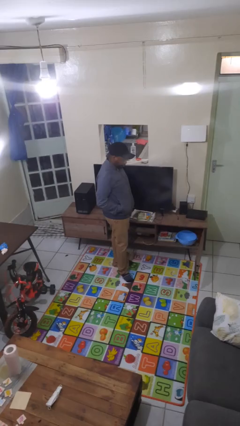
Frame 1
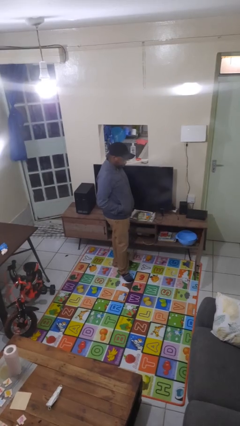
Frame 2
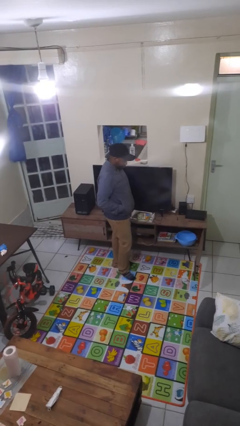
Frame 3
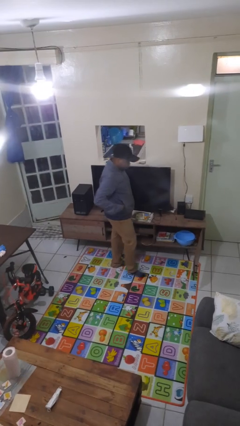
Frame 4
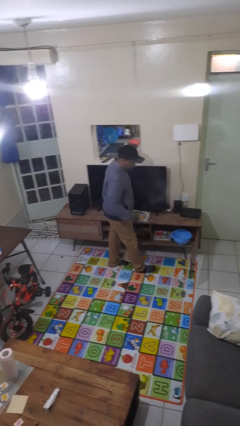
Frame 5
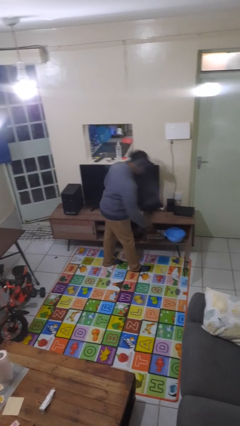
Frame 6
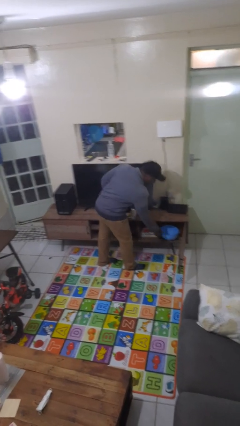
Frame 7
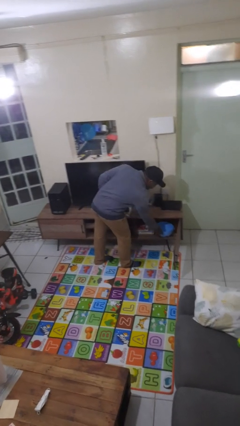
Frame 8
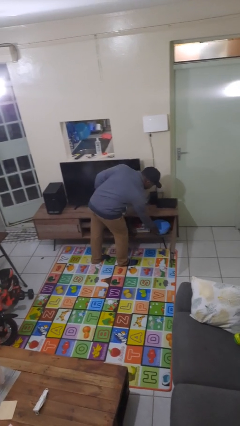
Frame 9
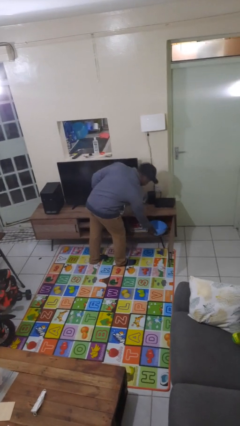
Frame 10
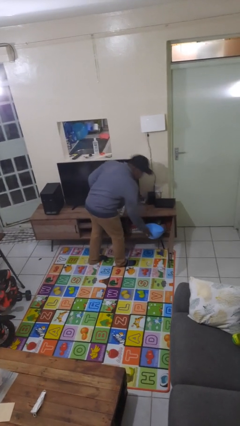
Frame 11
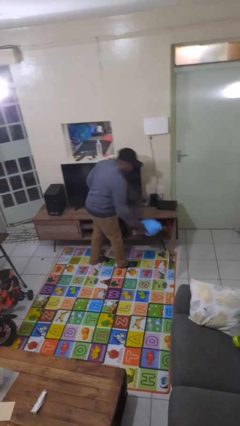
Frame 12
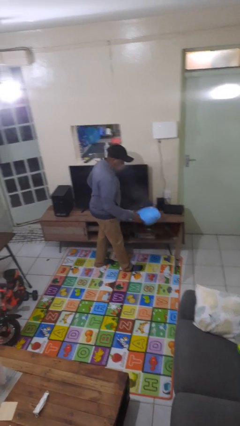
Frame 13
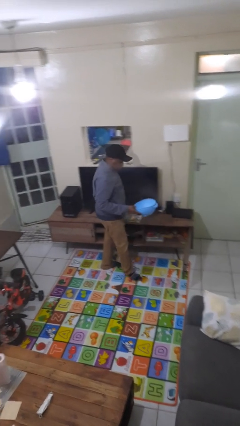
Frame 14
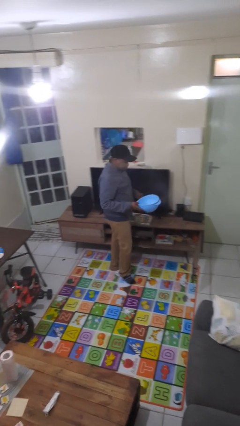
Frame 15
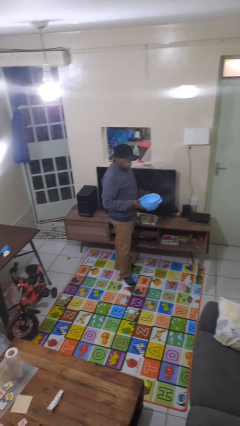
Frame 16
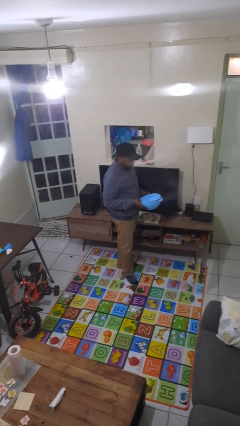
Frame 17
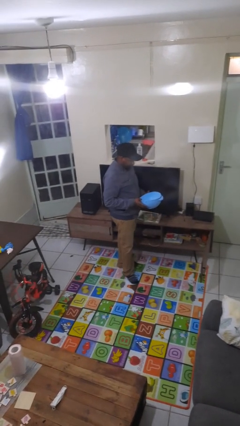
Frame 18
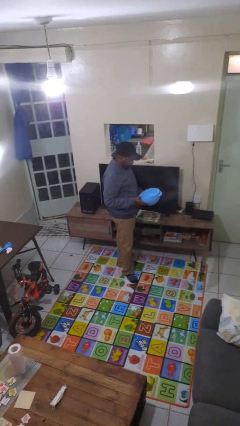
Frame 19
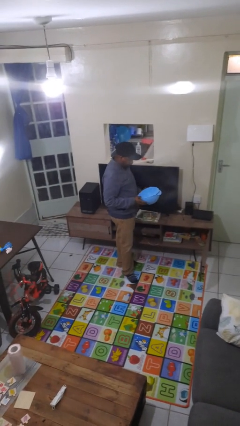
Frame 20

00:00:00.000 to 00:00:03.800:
person picks up object from cabinet

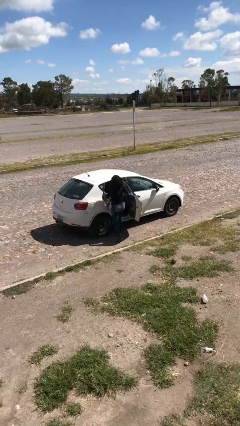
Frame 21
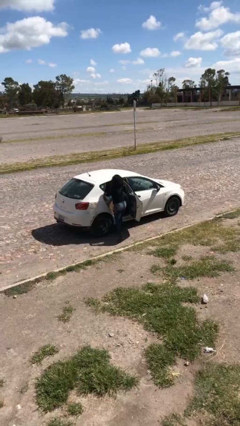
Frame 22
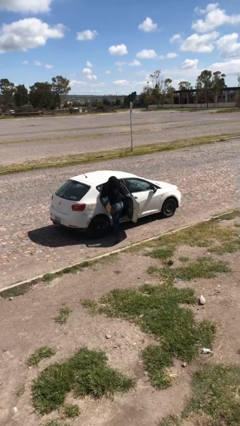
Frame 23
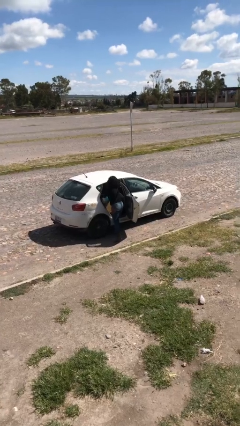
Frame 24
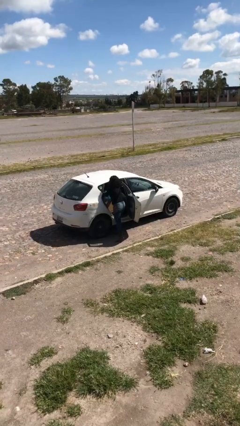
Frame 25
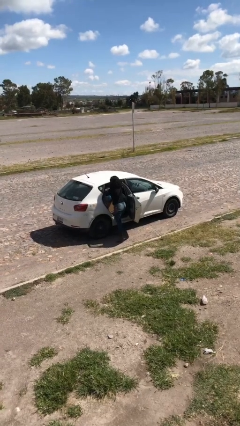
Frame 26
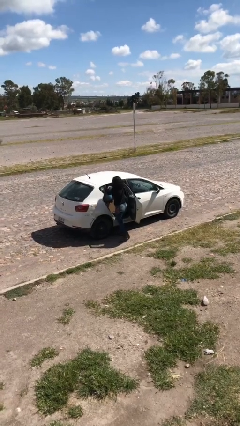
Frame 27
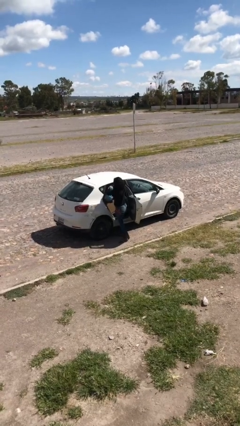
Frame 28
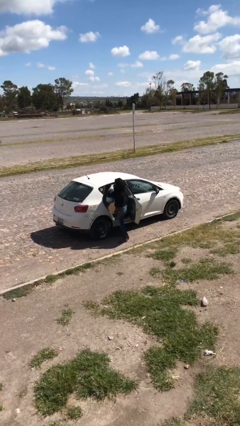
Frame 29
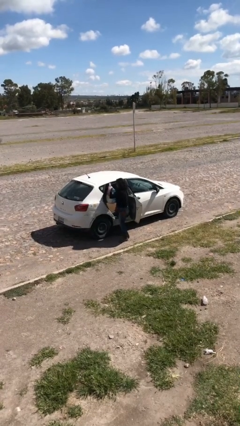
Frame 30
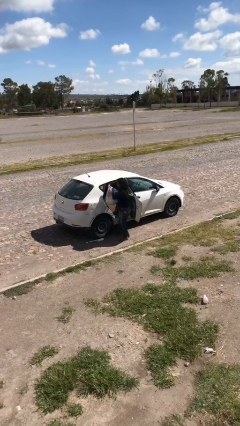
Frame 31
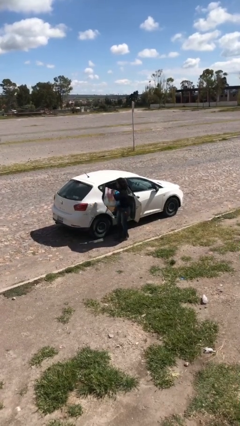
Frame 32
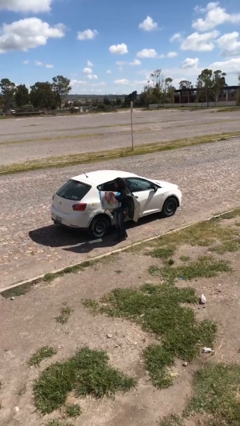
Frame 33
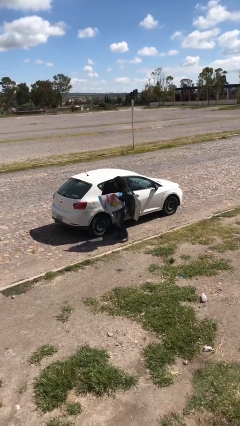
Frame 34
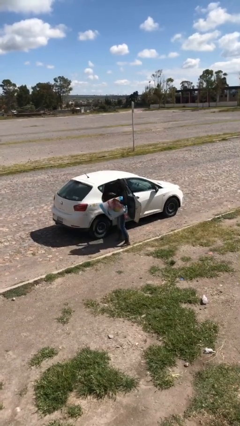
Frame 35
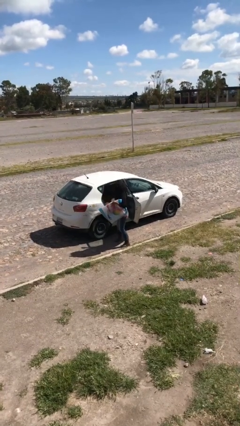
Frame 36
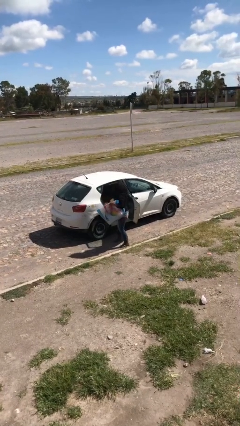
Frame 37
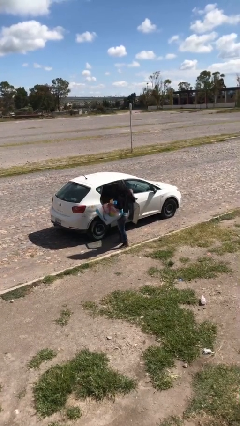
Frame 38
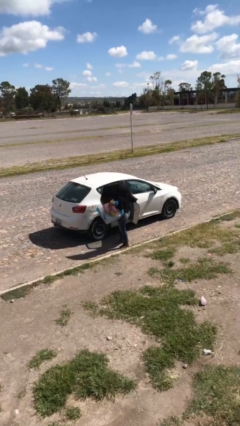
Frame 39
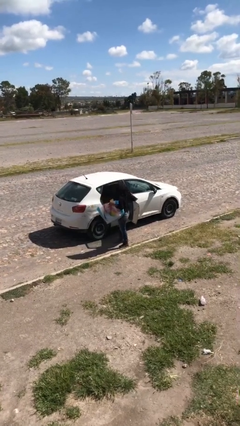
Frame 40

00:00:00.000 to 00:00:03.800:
person unloads car

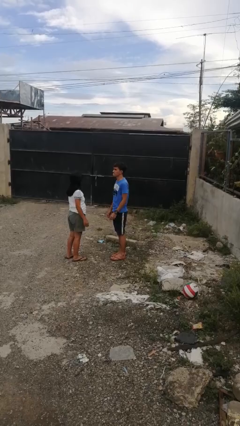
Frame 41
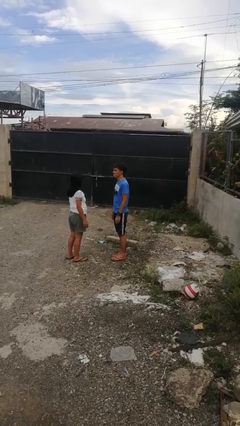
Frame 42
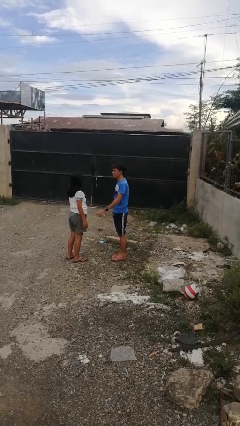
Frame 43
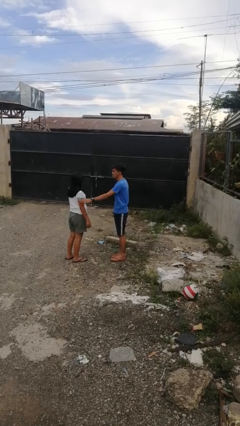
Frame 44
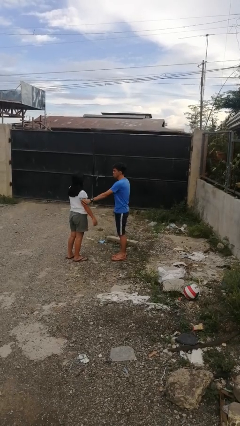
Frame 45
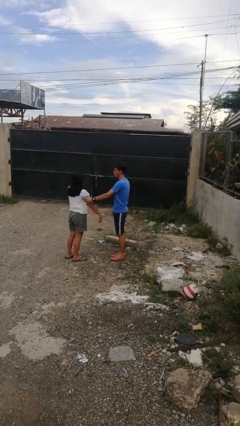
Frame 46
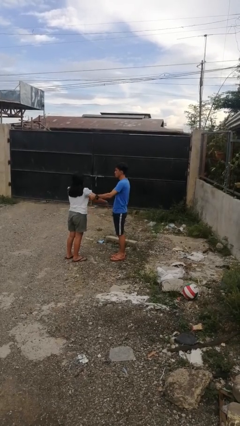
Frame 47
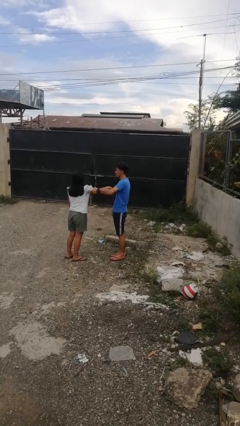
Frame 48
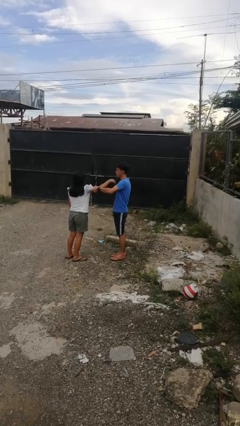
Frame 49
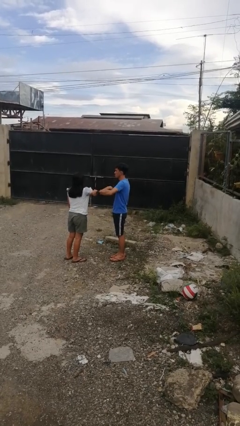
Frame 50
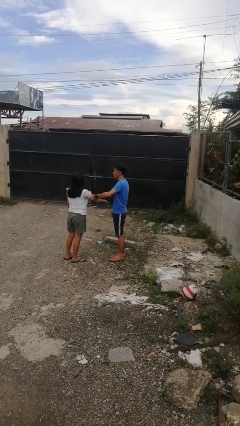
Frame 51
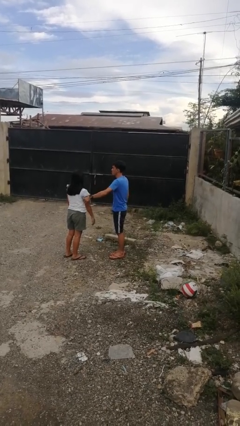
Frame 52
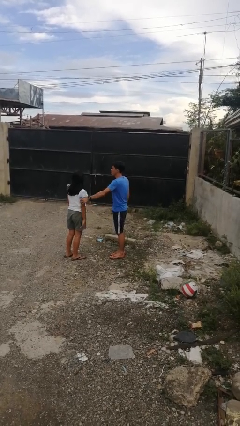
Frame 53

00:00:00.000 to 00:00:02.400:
person grabs person by bicep

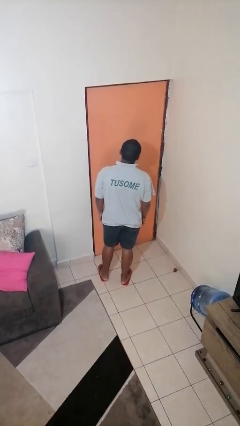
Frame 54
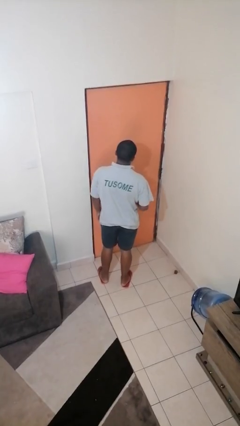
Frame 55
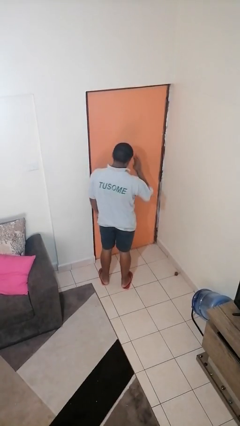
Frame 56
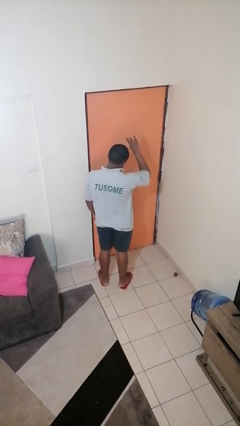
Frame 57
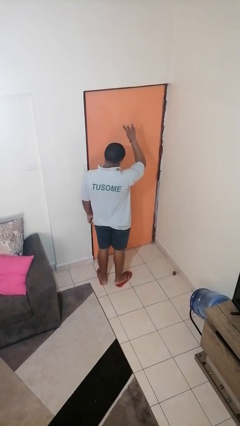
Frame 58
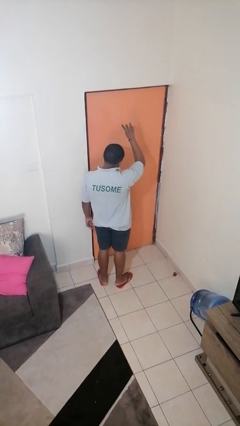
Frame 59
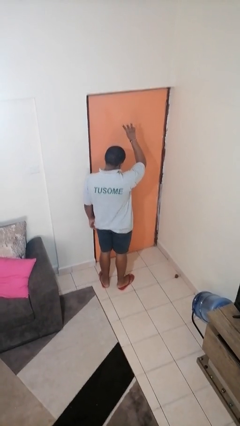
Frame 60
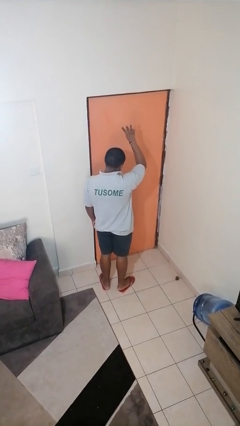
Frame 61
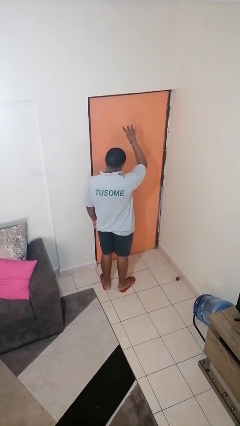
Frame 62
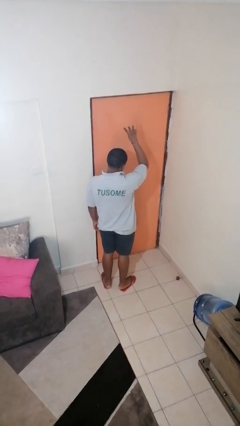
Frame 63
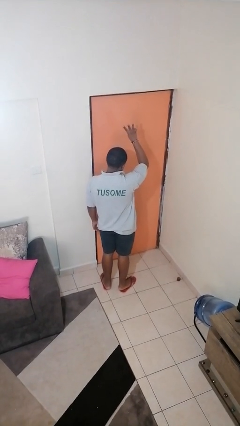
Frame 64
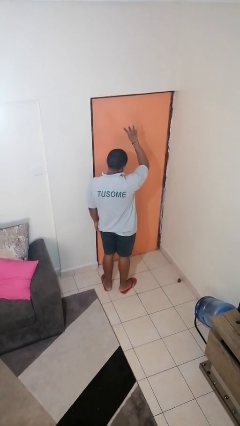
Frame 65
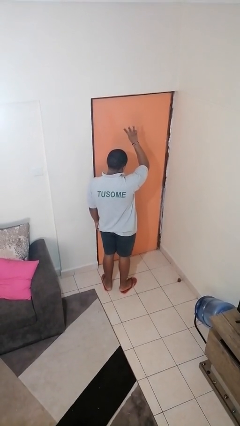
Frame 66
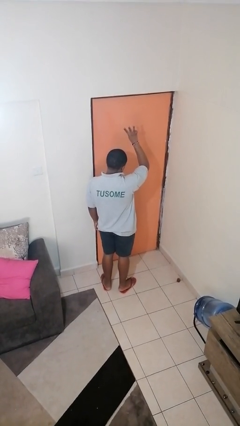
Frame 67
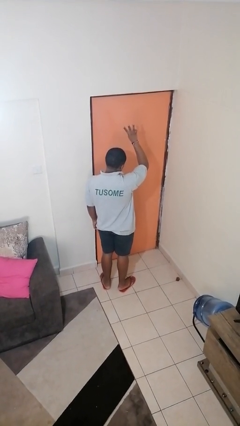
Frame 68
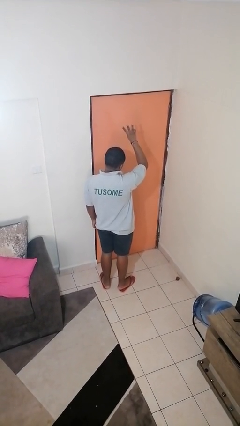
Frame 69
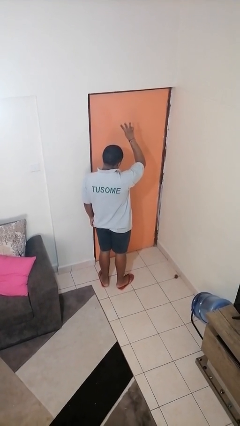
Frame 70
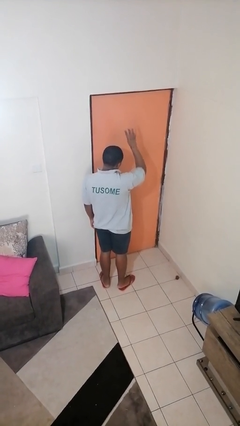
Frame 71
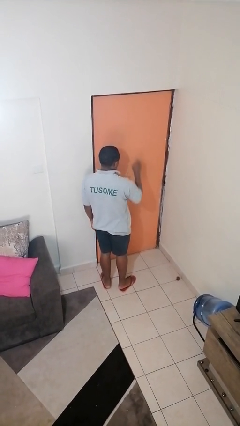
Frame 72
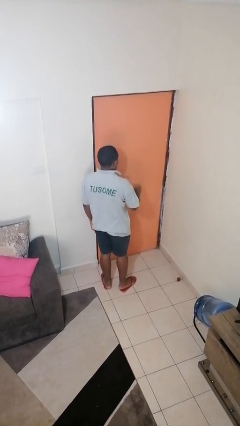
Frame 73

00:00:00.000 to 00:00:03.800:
person gestures number three

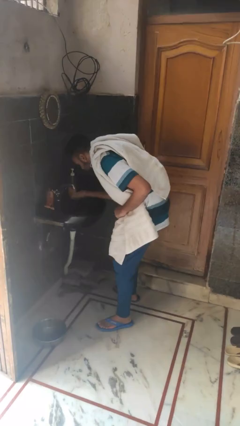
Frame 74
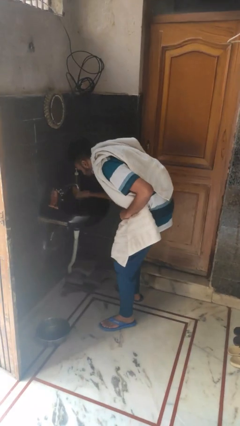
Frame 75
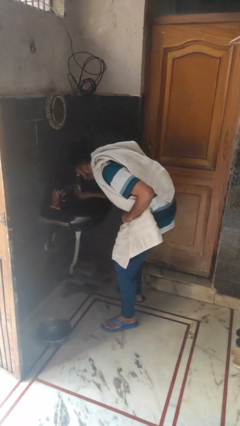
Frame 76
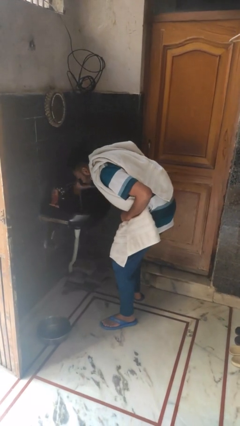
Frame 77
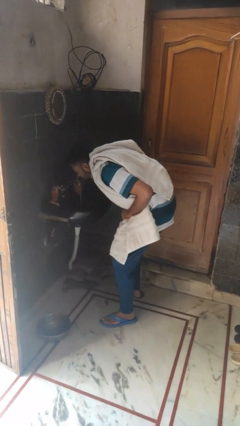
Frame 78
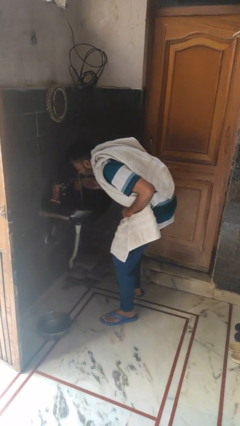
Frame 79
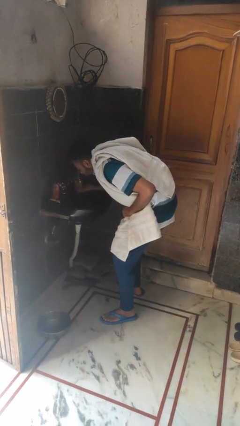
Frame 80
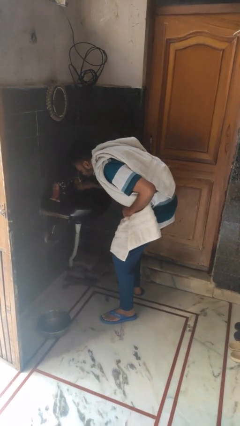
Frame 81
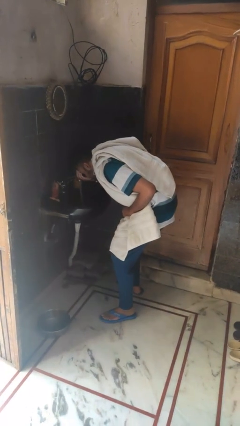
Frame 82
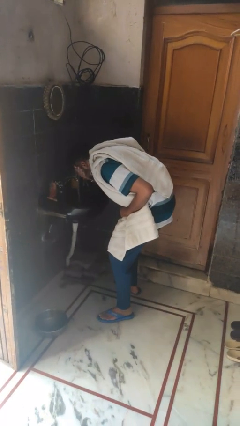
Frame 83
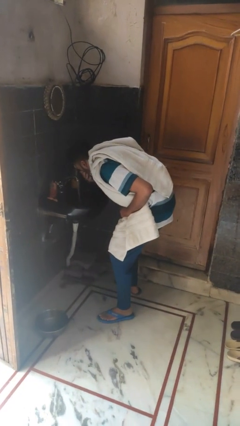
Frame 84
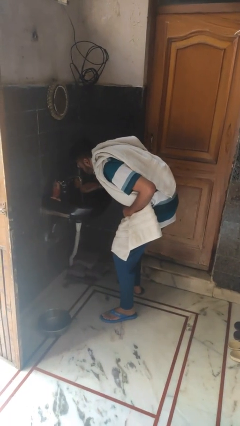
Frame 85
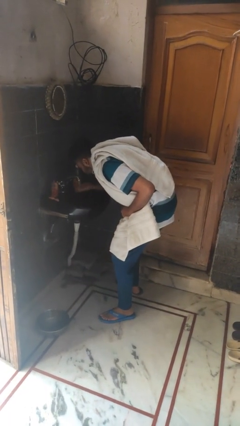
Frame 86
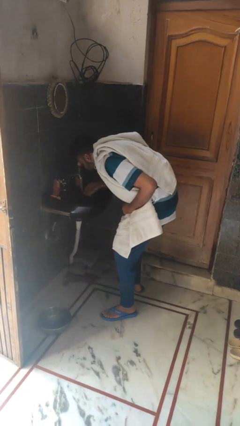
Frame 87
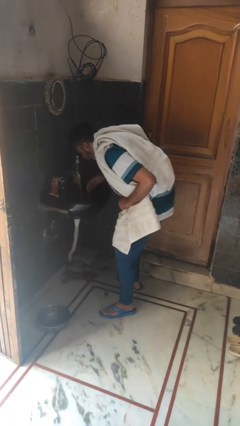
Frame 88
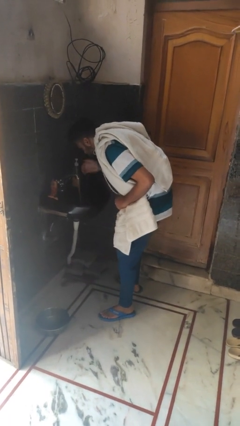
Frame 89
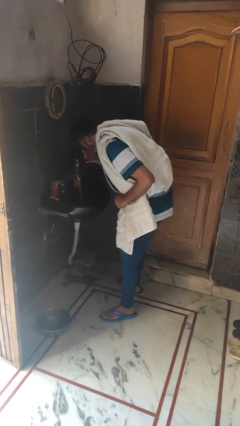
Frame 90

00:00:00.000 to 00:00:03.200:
person washes face

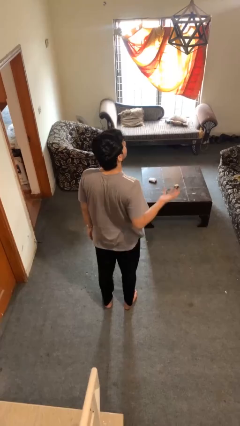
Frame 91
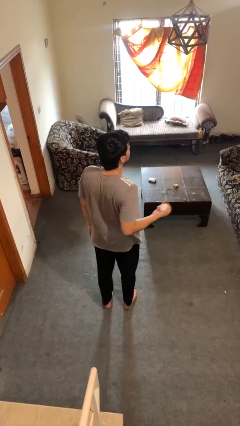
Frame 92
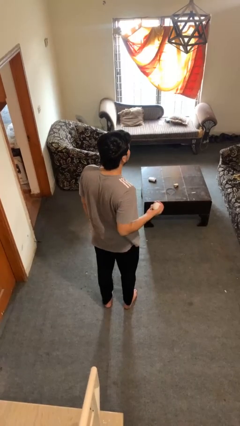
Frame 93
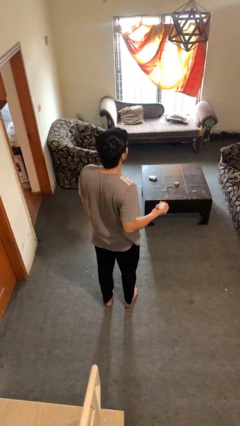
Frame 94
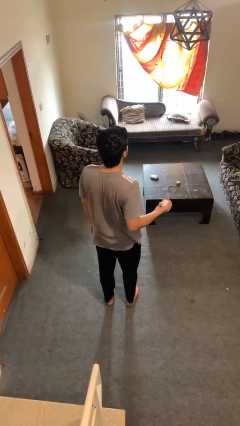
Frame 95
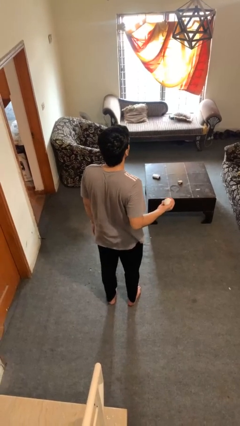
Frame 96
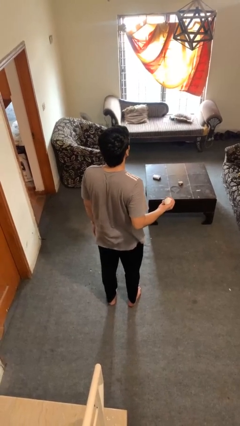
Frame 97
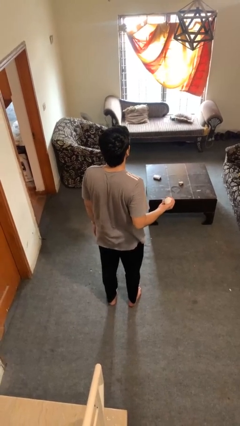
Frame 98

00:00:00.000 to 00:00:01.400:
person catches dropped object
